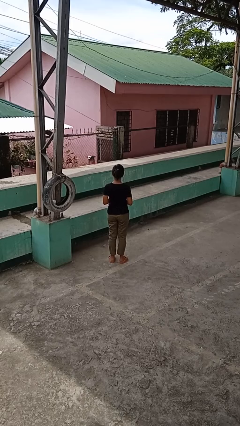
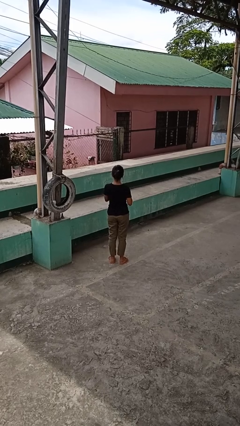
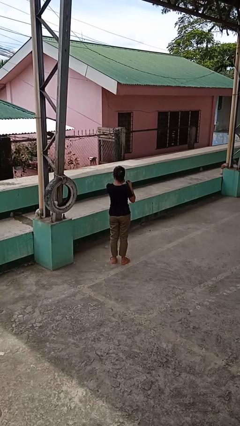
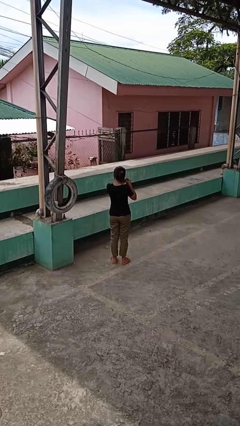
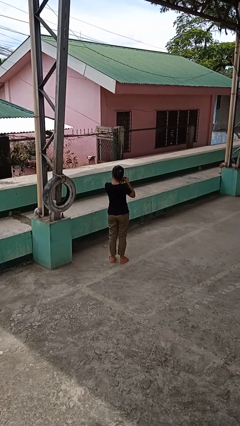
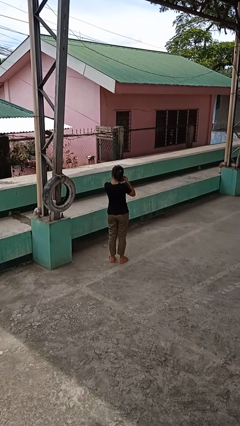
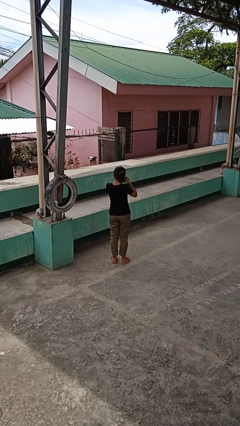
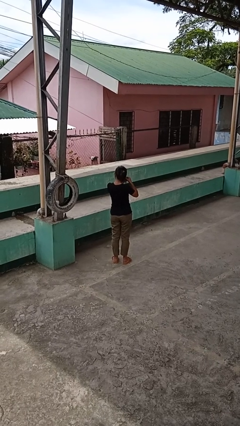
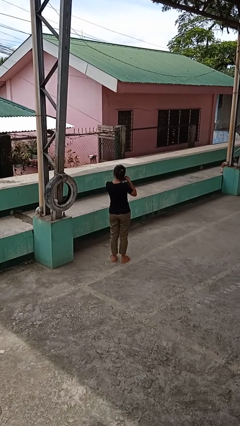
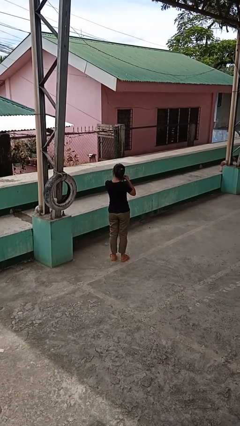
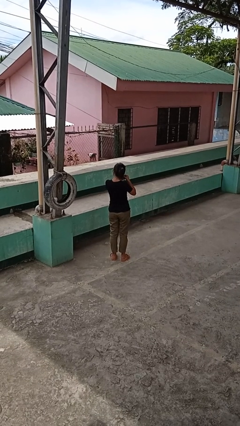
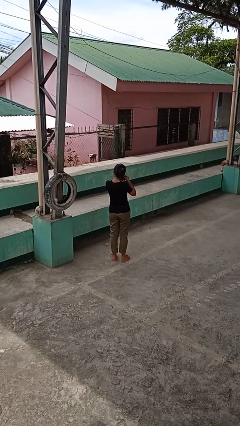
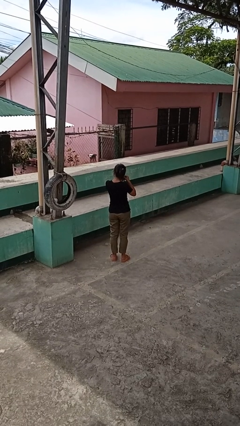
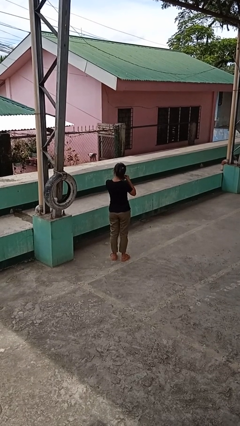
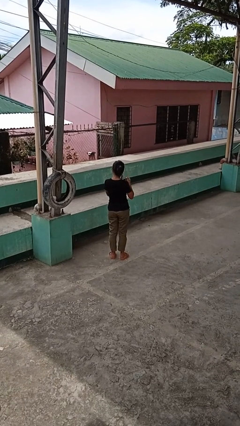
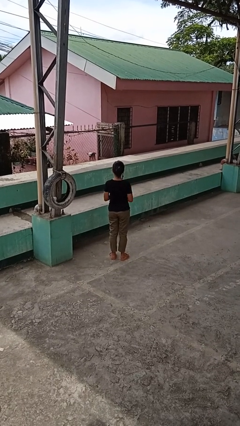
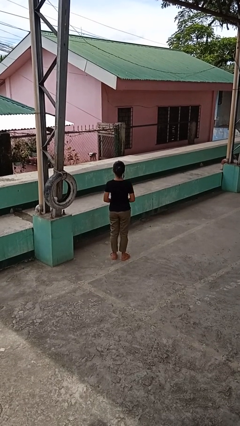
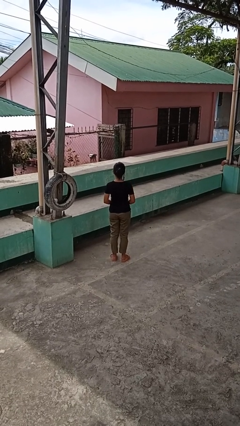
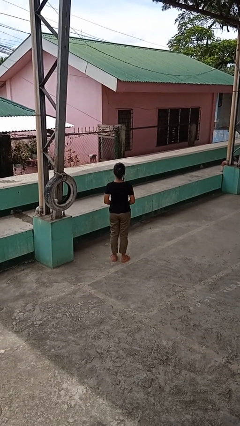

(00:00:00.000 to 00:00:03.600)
person puts on earrings

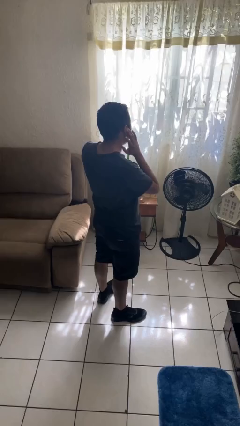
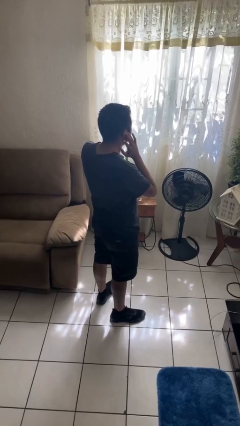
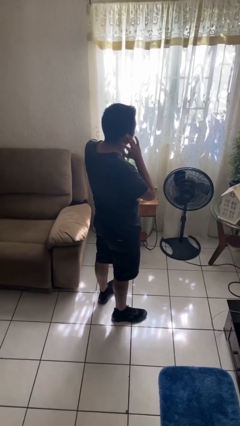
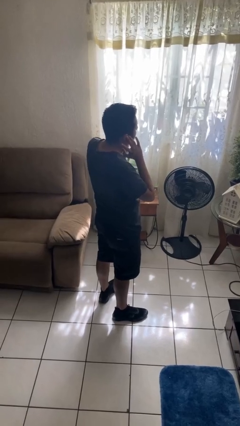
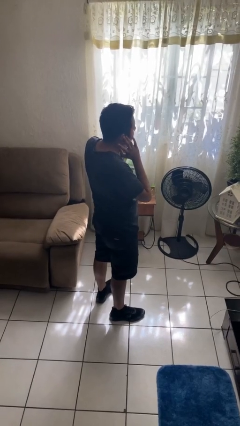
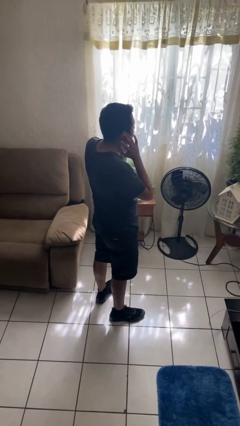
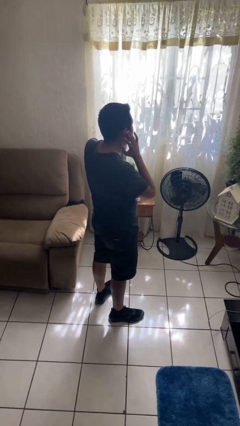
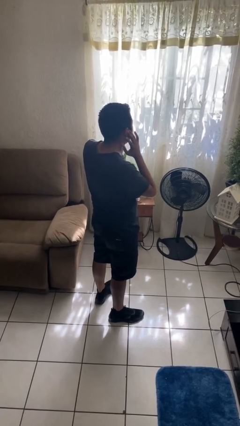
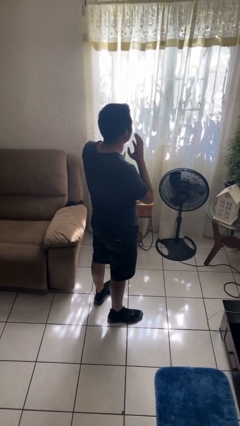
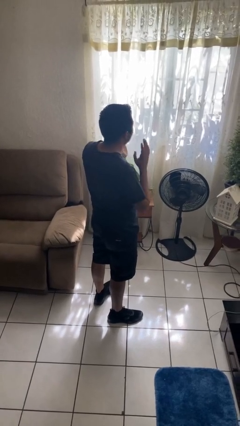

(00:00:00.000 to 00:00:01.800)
person puts fingers in ear

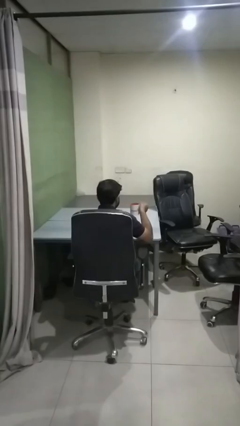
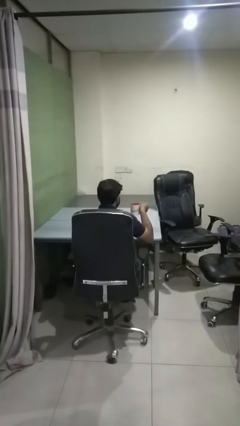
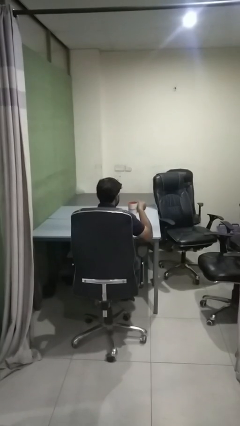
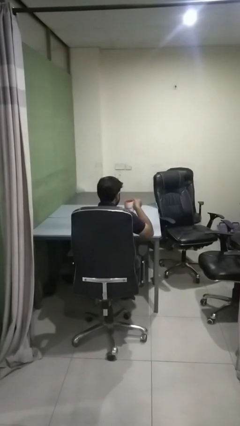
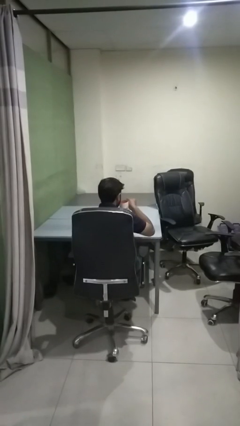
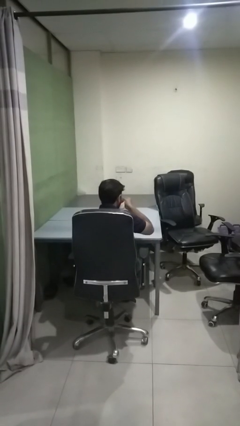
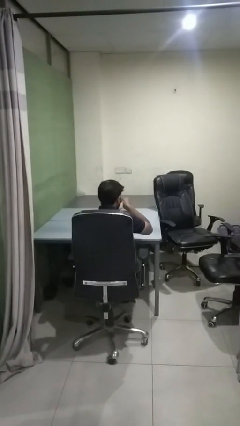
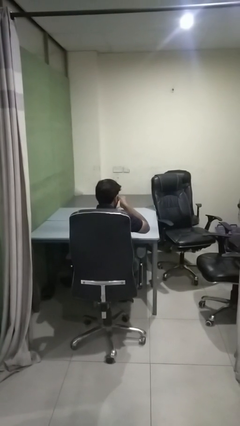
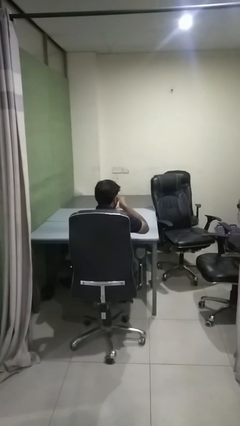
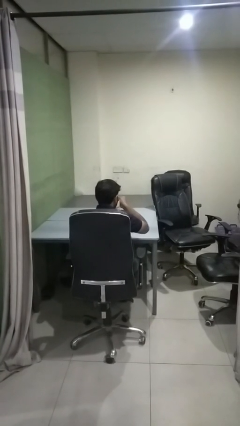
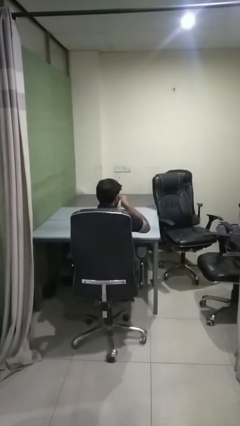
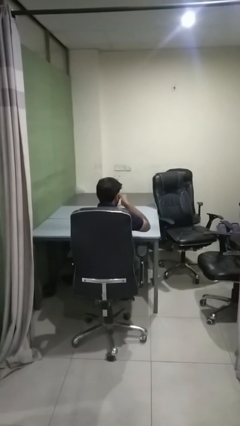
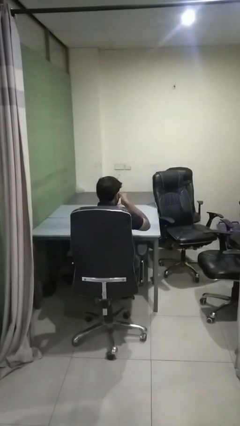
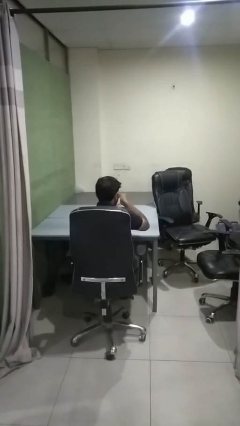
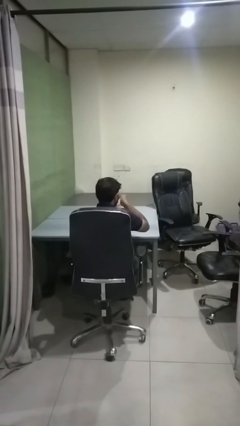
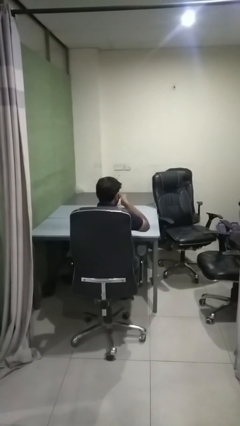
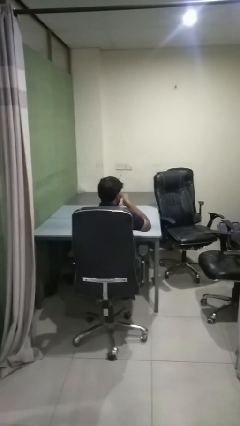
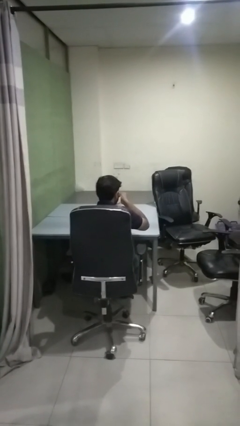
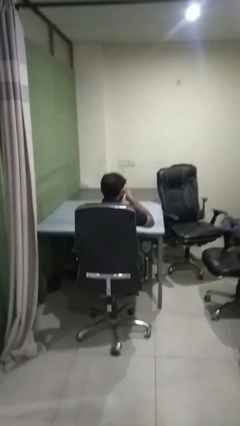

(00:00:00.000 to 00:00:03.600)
person drinks from mug

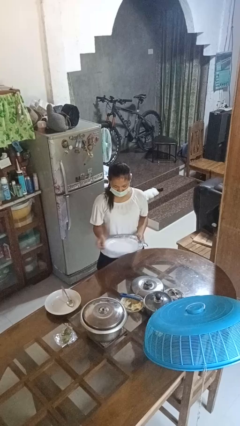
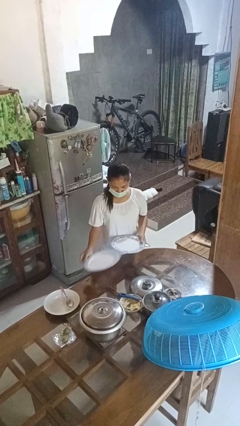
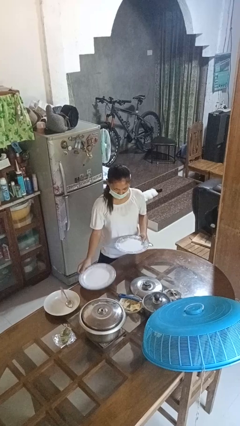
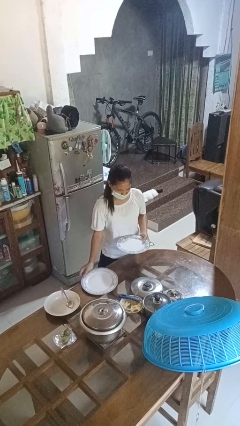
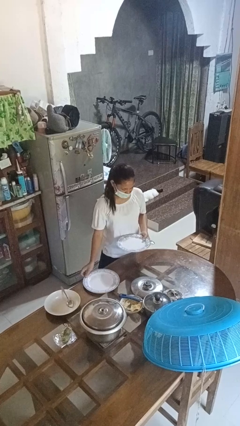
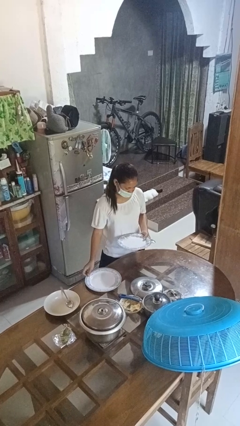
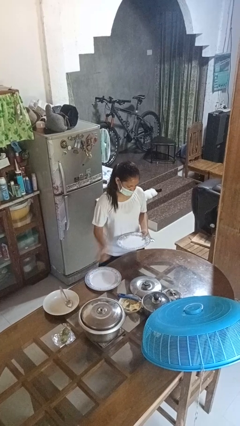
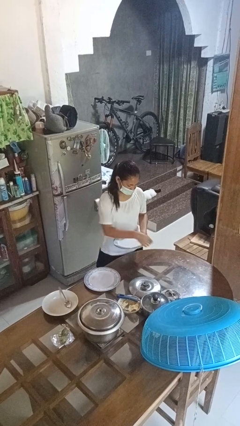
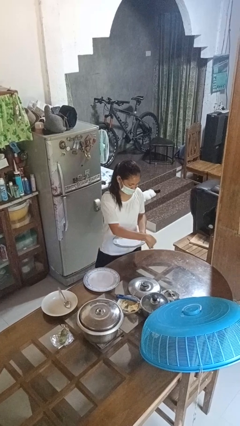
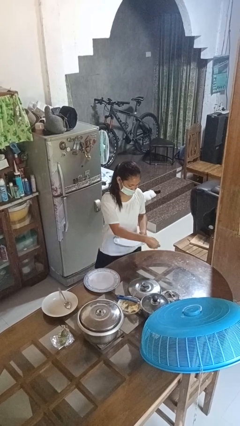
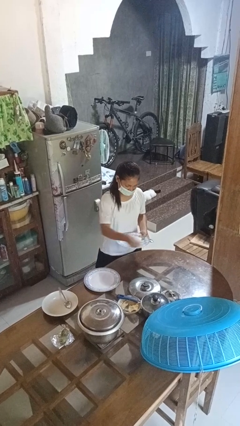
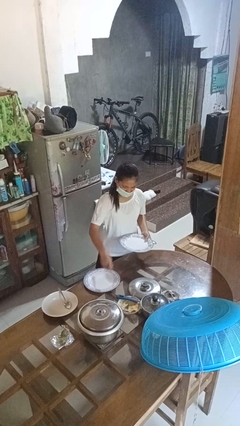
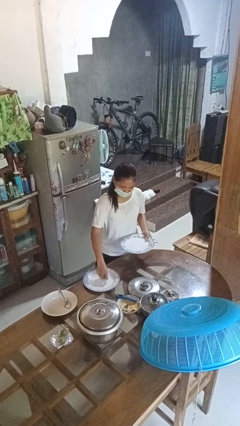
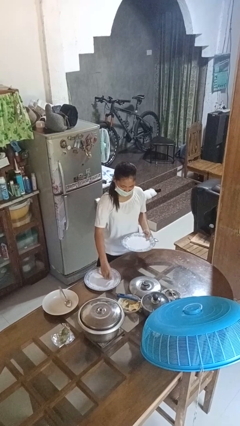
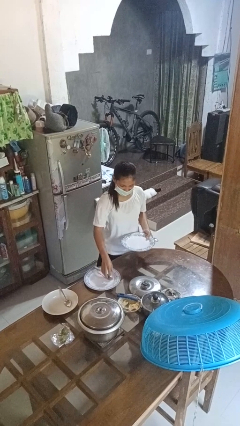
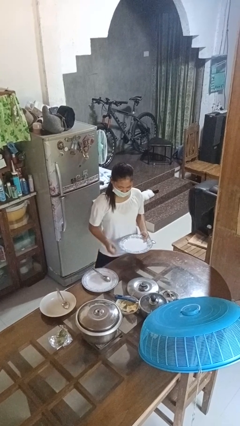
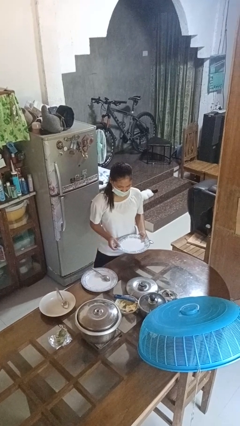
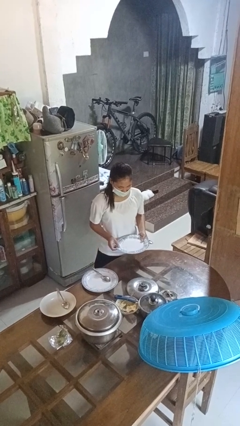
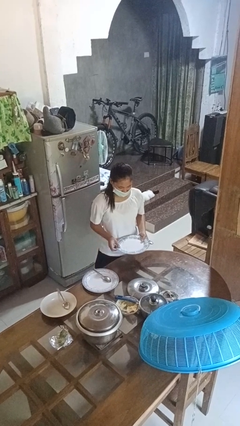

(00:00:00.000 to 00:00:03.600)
person sets table

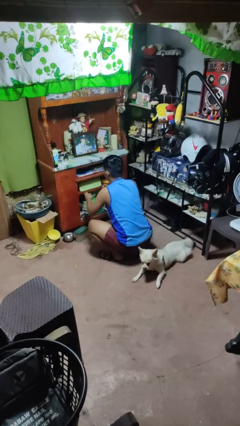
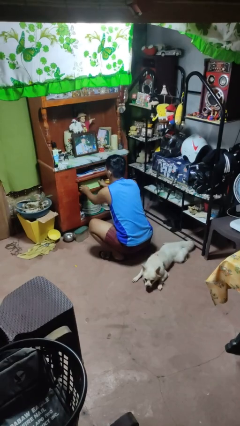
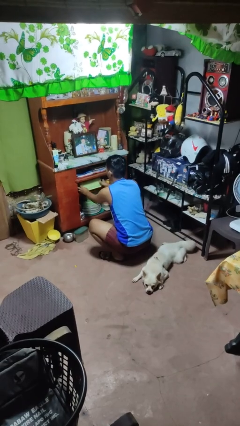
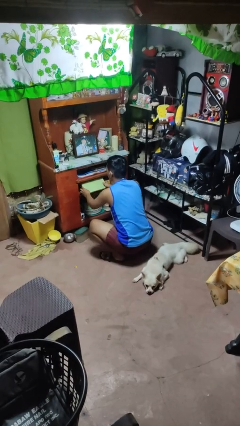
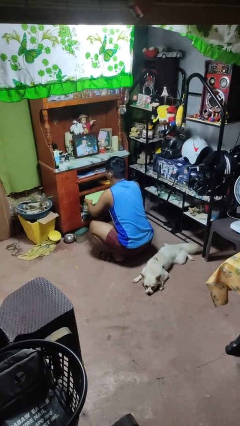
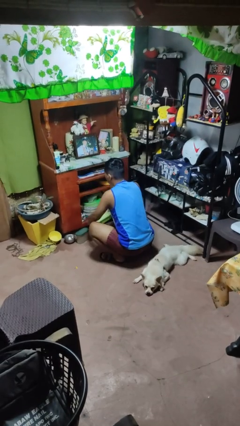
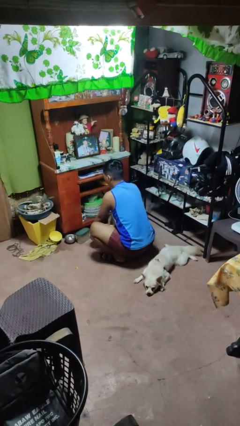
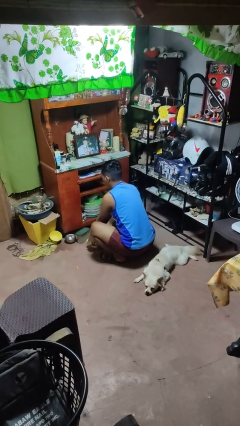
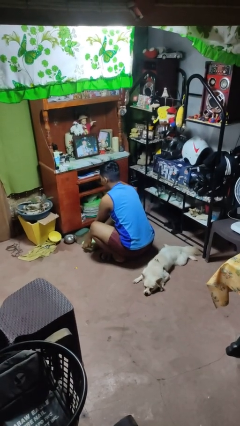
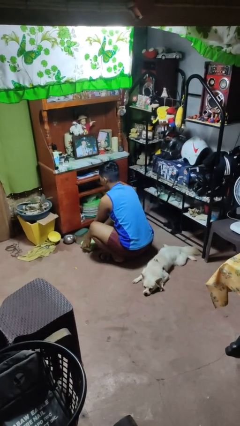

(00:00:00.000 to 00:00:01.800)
person takes object from cabinet

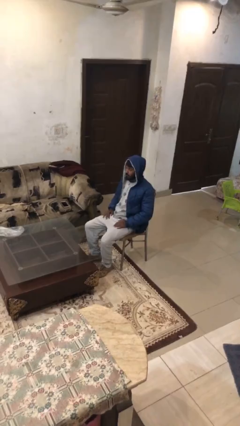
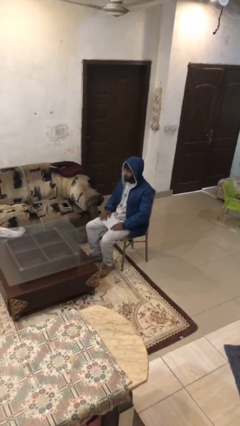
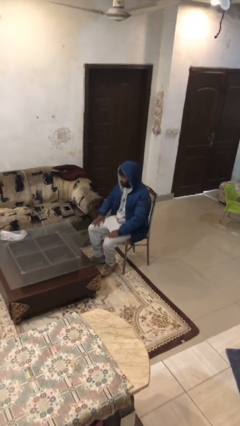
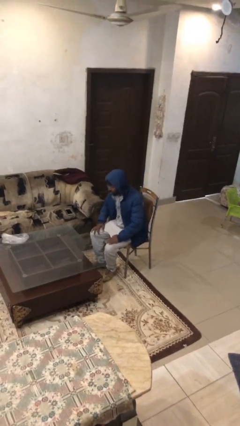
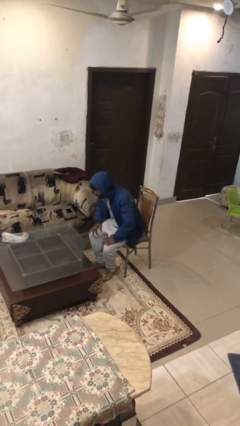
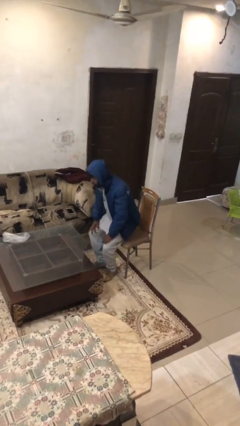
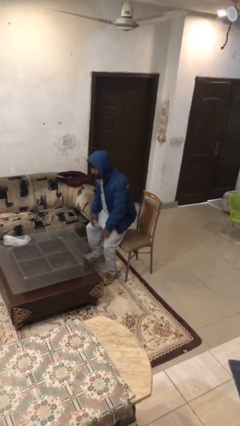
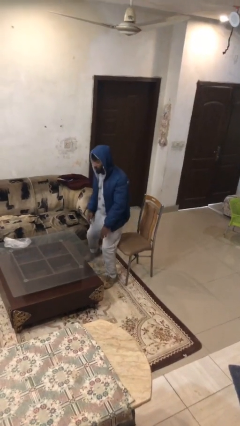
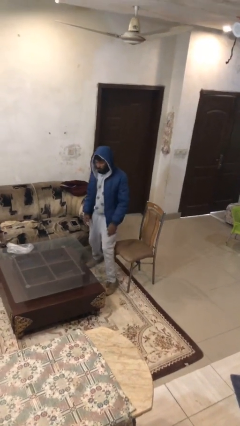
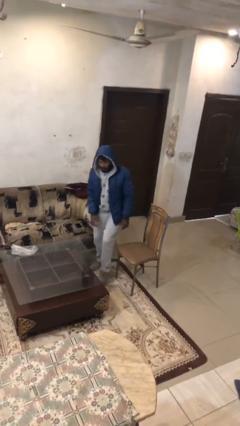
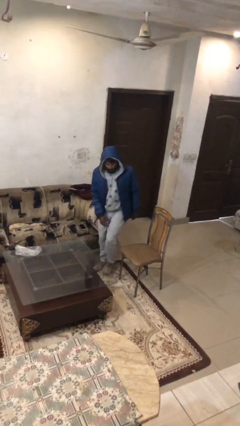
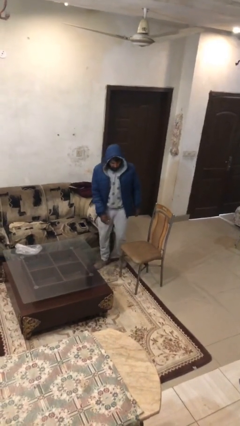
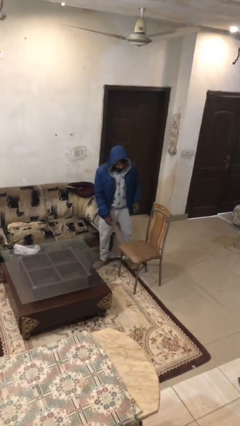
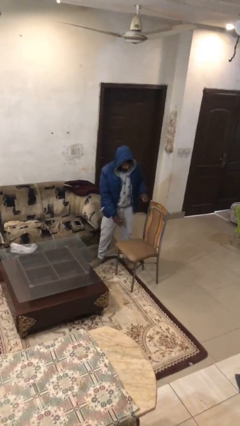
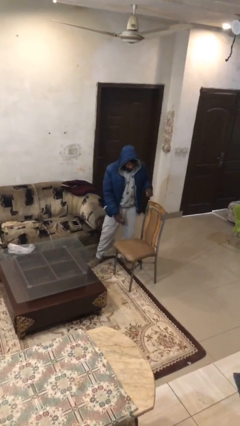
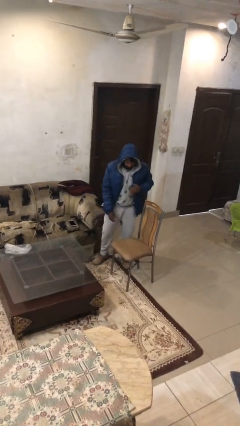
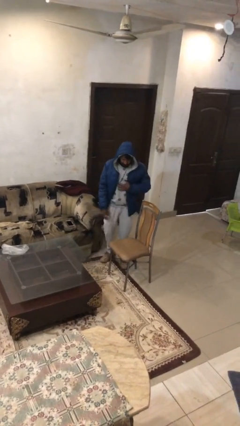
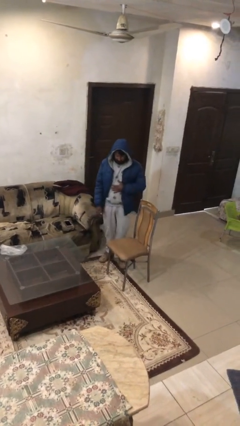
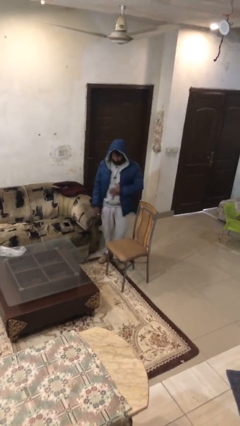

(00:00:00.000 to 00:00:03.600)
person stands up
